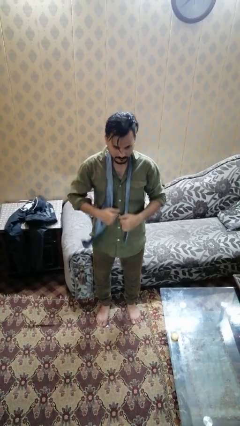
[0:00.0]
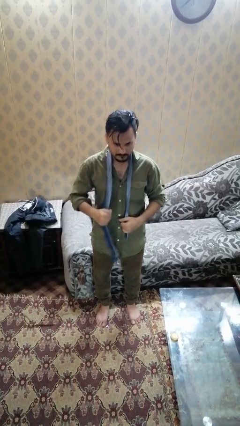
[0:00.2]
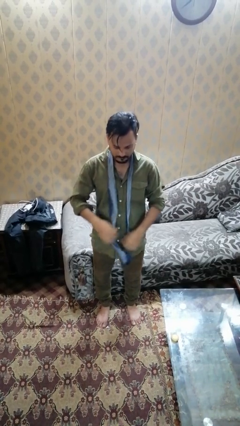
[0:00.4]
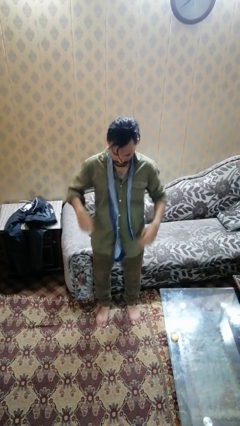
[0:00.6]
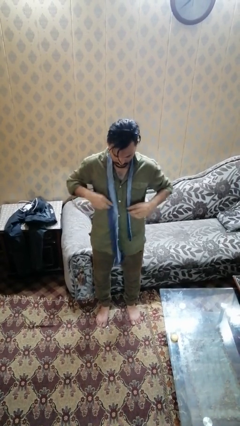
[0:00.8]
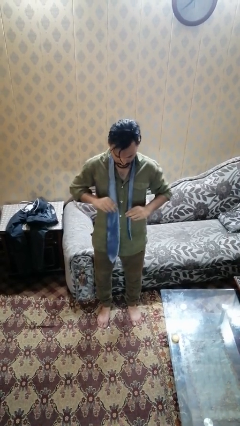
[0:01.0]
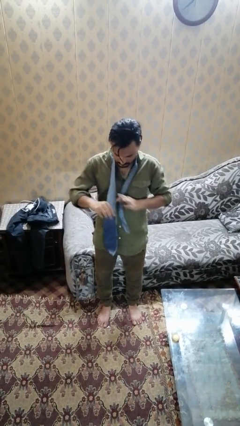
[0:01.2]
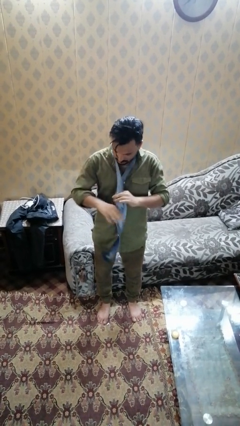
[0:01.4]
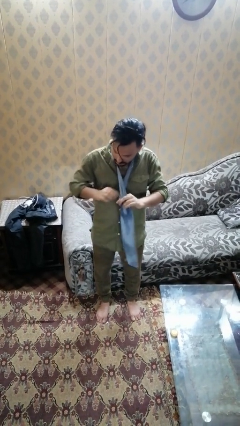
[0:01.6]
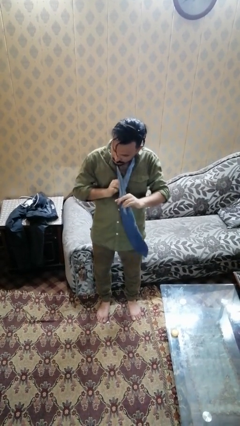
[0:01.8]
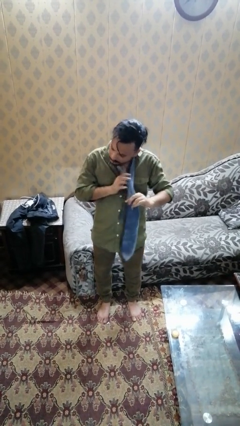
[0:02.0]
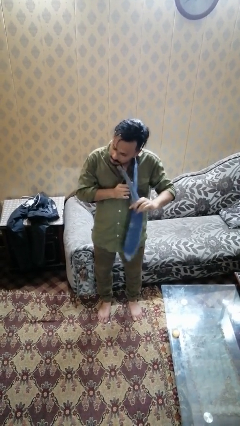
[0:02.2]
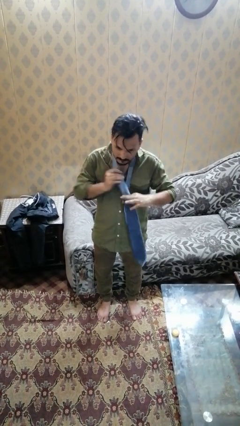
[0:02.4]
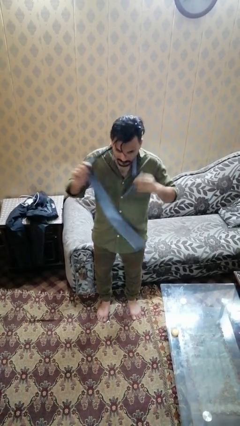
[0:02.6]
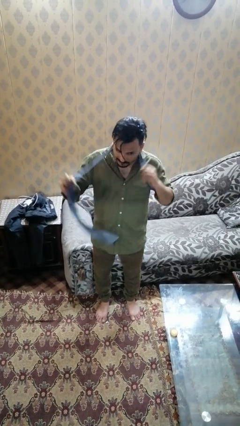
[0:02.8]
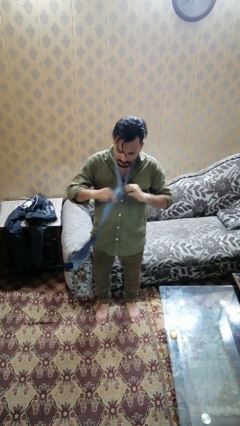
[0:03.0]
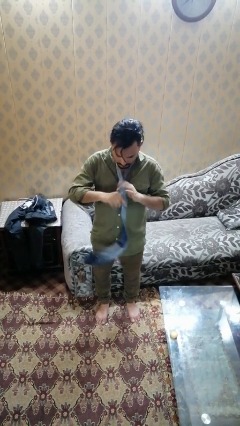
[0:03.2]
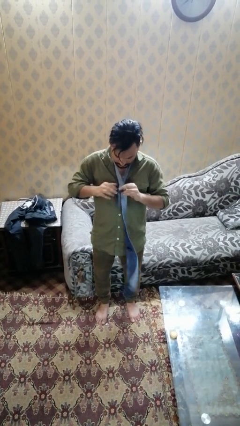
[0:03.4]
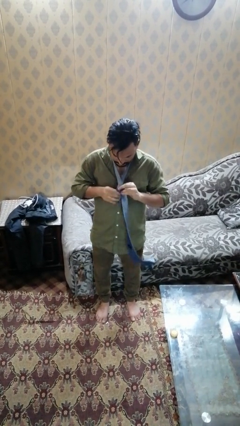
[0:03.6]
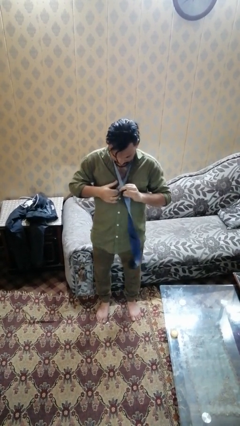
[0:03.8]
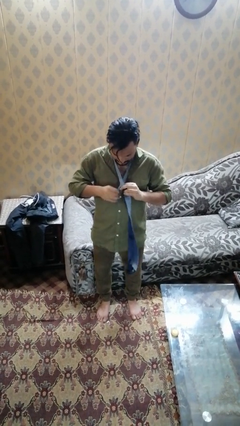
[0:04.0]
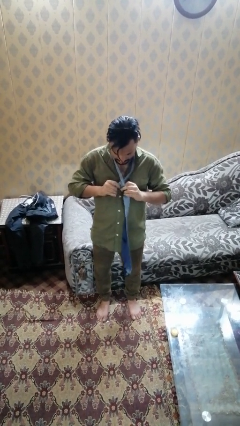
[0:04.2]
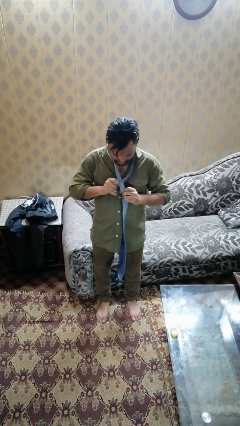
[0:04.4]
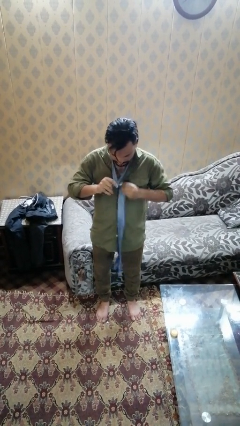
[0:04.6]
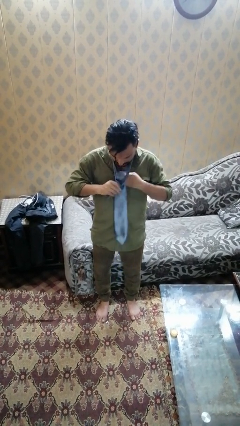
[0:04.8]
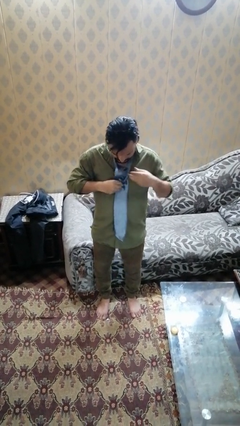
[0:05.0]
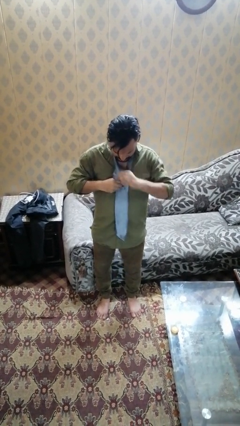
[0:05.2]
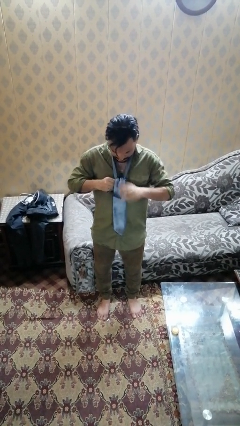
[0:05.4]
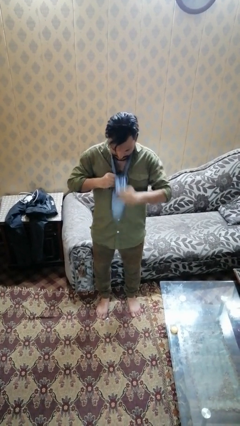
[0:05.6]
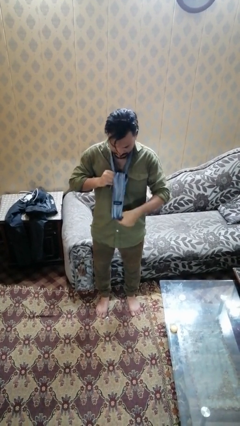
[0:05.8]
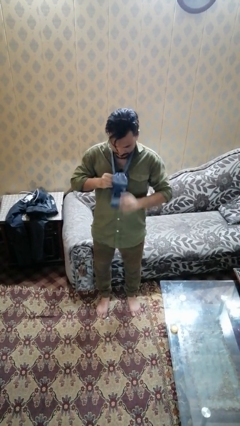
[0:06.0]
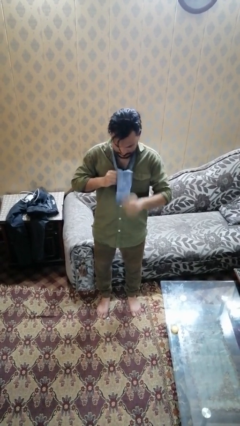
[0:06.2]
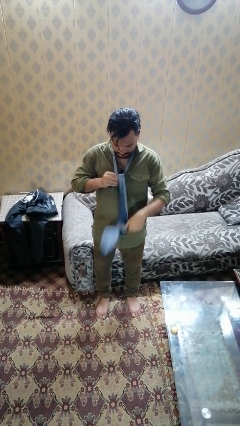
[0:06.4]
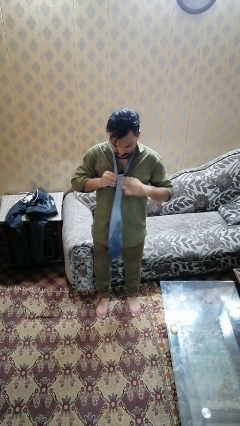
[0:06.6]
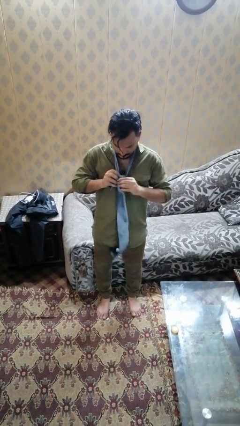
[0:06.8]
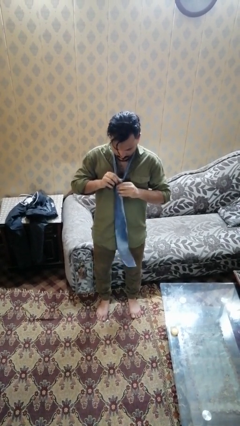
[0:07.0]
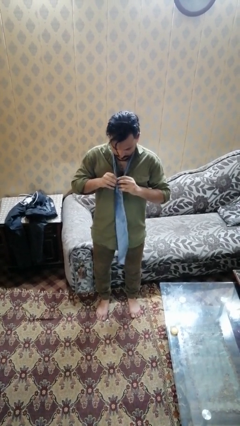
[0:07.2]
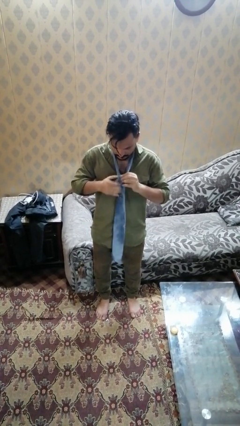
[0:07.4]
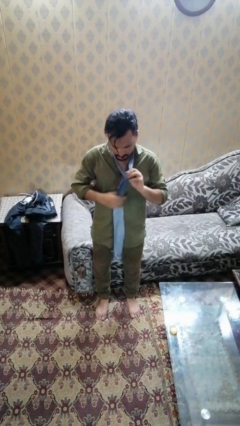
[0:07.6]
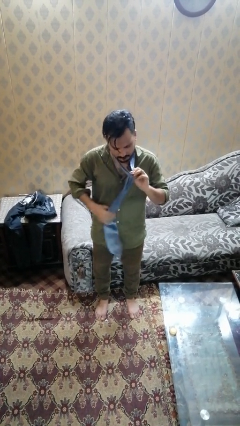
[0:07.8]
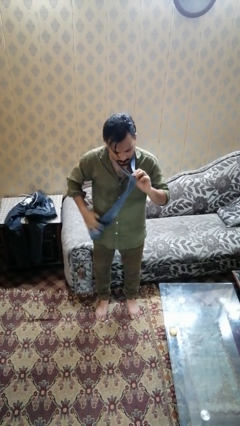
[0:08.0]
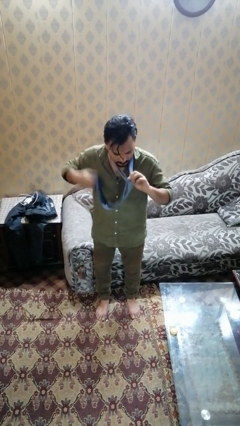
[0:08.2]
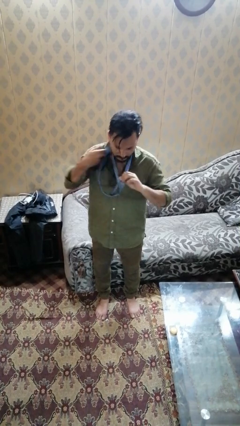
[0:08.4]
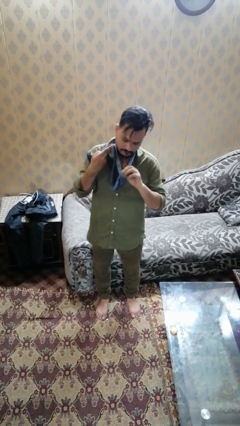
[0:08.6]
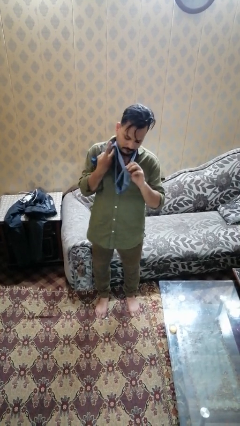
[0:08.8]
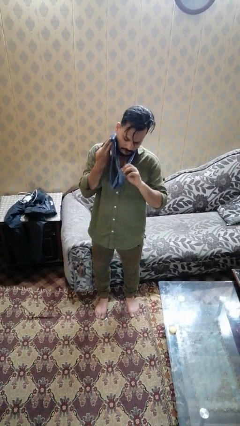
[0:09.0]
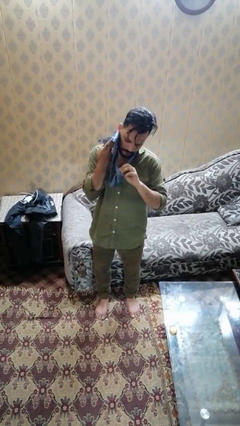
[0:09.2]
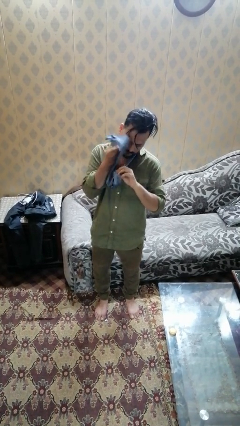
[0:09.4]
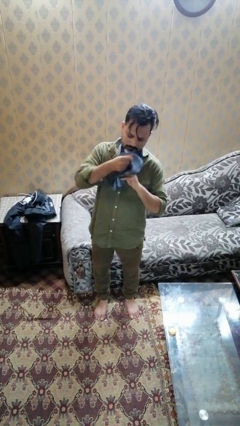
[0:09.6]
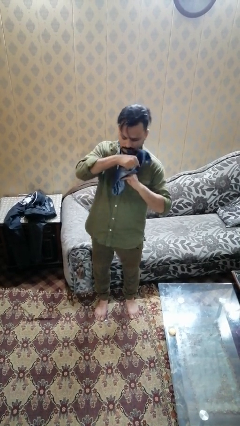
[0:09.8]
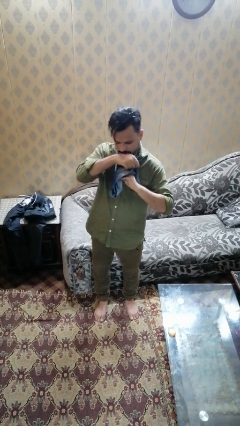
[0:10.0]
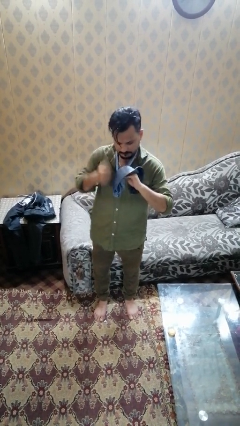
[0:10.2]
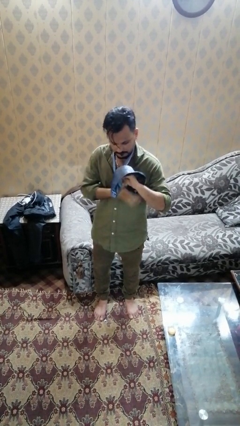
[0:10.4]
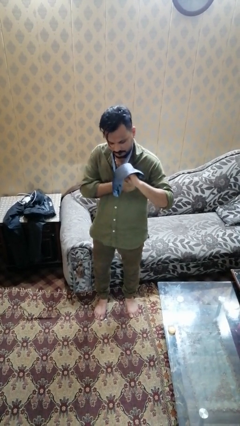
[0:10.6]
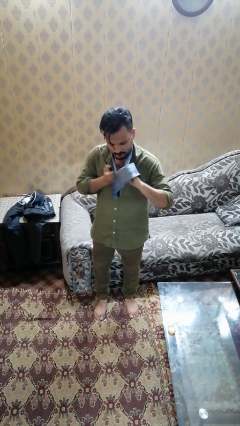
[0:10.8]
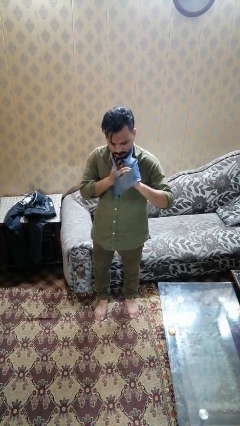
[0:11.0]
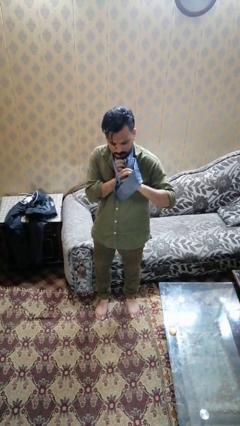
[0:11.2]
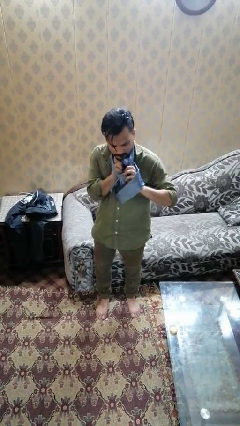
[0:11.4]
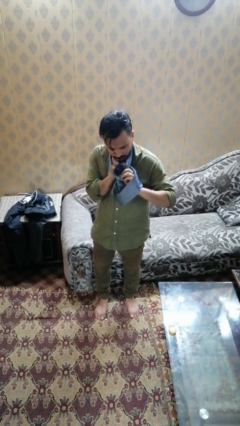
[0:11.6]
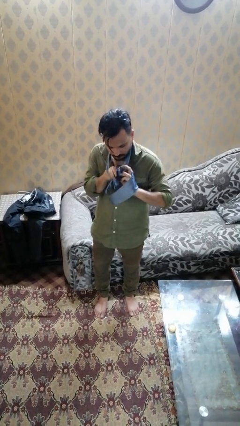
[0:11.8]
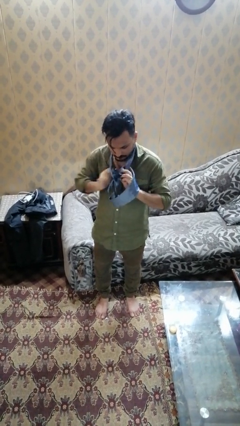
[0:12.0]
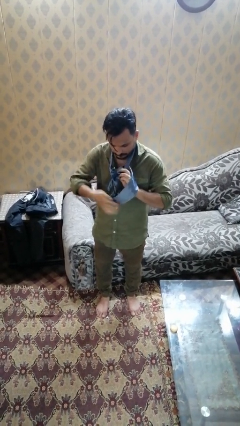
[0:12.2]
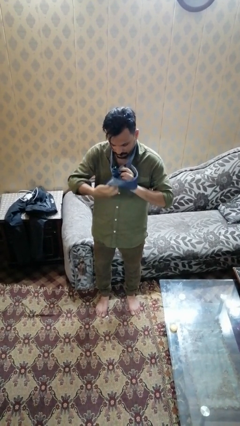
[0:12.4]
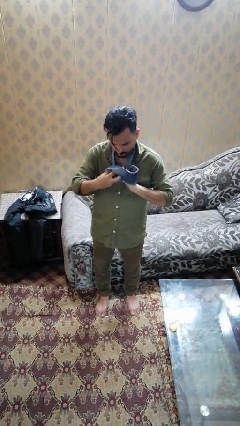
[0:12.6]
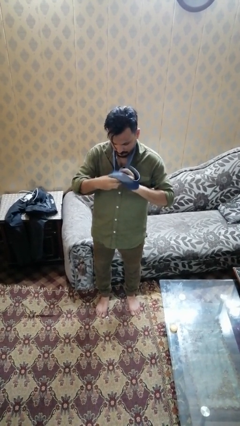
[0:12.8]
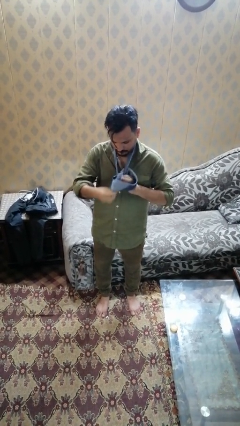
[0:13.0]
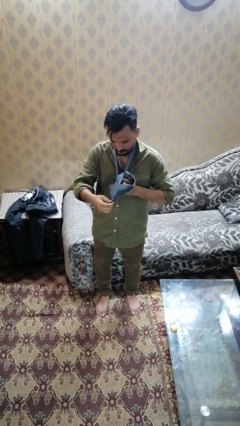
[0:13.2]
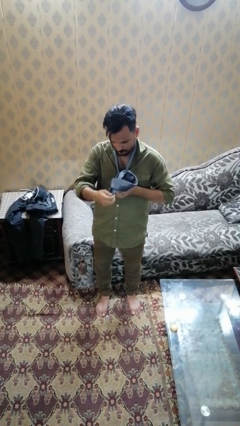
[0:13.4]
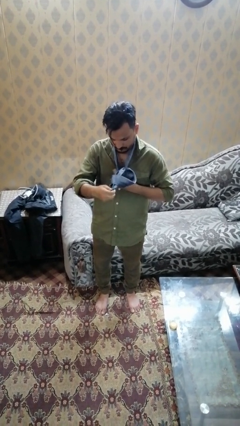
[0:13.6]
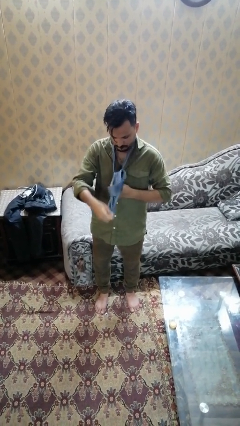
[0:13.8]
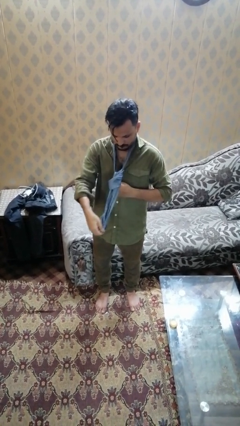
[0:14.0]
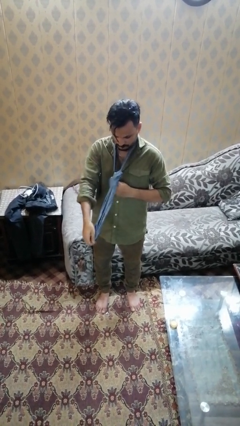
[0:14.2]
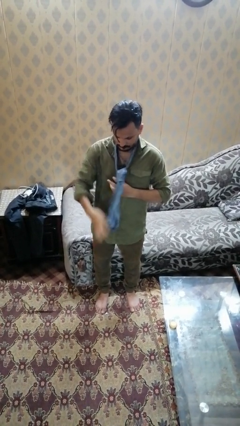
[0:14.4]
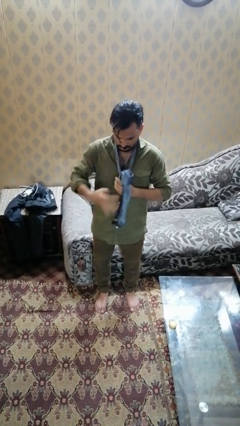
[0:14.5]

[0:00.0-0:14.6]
person puts on necktie

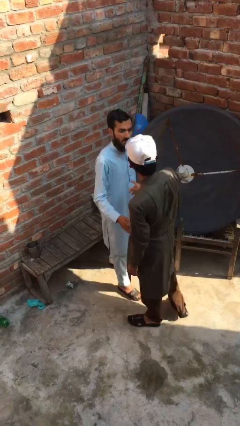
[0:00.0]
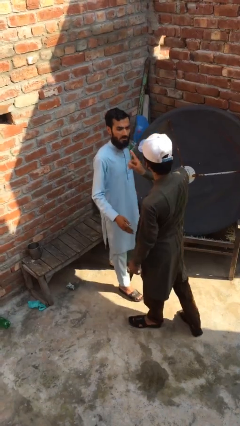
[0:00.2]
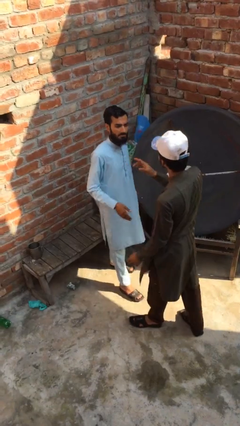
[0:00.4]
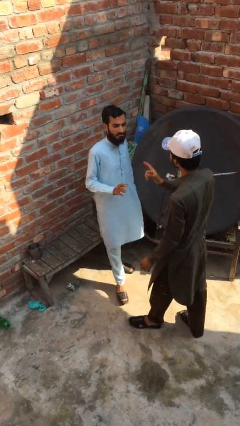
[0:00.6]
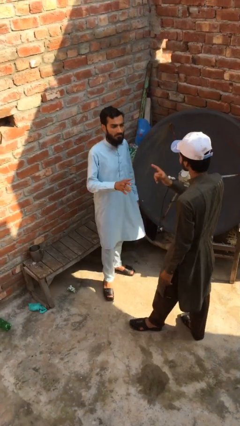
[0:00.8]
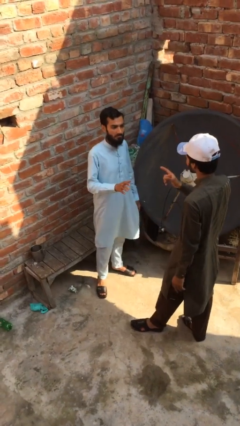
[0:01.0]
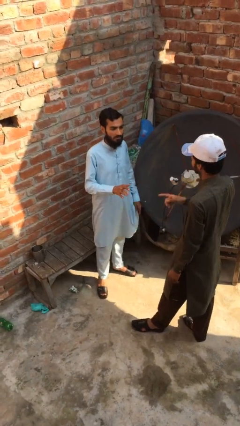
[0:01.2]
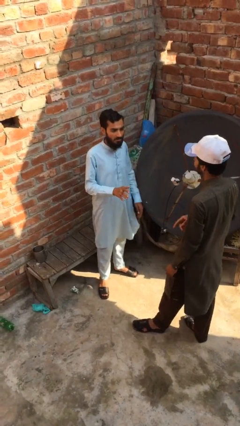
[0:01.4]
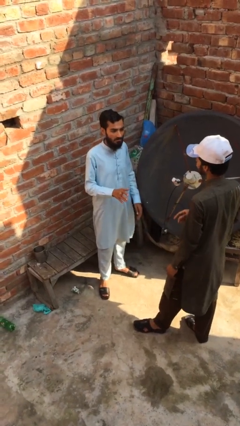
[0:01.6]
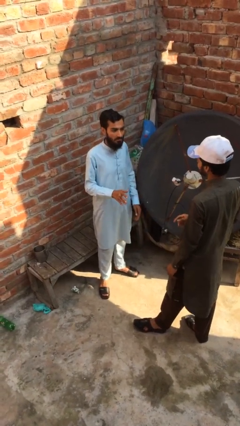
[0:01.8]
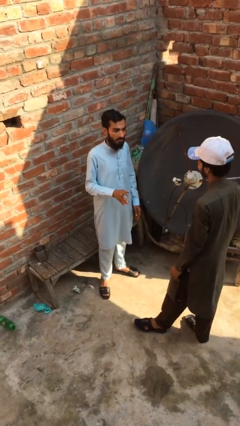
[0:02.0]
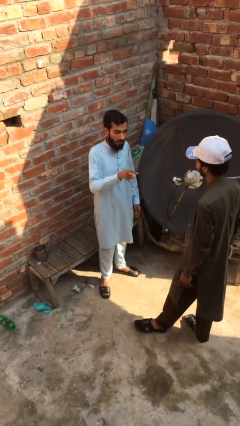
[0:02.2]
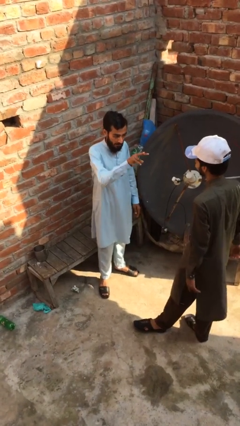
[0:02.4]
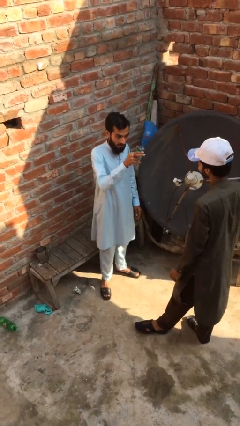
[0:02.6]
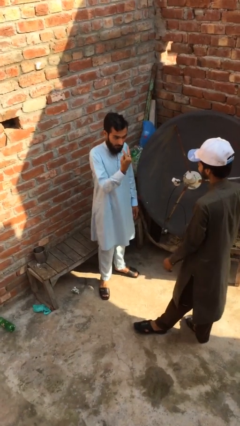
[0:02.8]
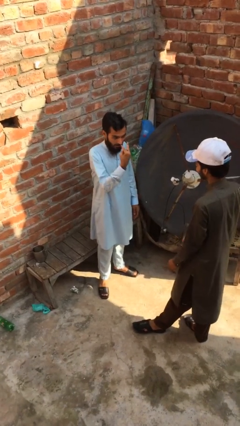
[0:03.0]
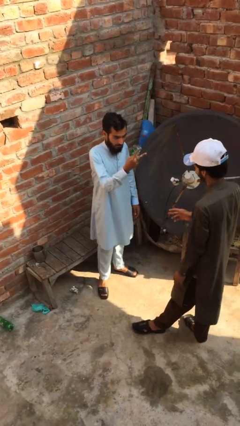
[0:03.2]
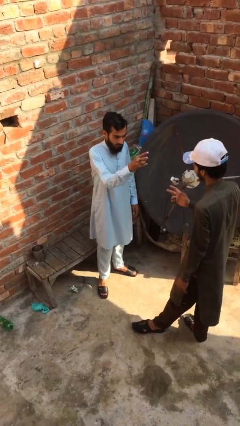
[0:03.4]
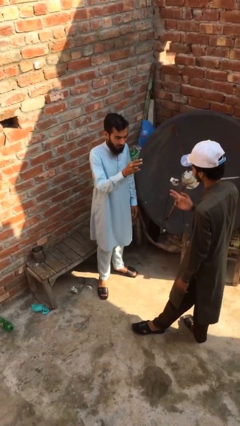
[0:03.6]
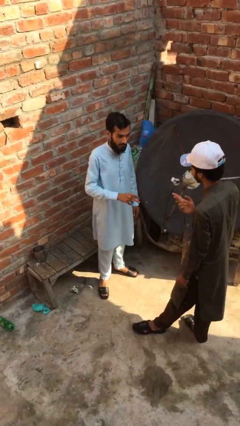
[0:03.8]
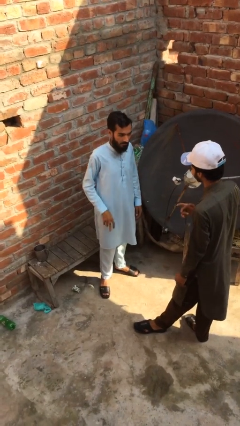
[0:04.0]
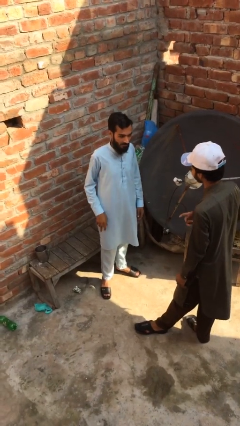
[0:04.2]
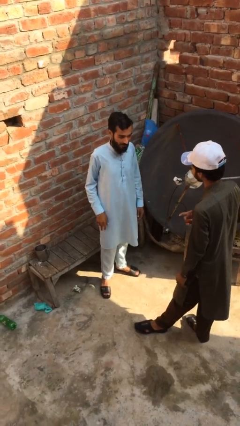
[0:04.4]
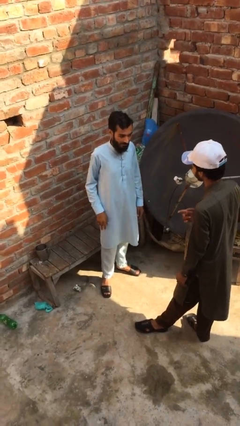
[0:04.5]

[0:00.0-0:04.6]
person talks to person
